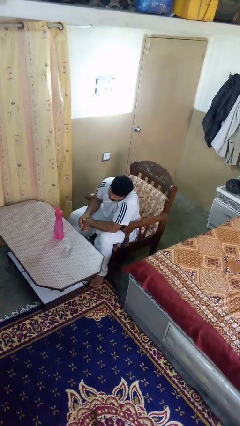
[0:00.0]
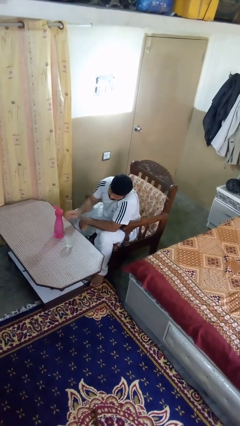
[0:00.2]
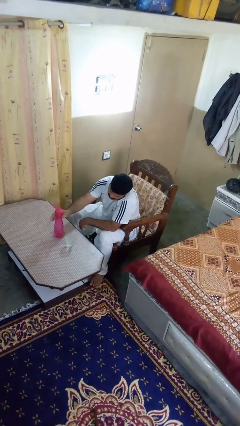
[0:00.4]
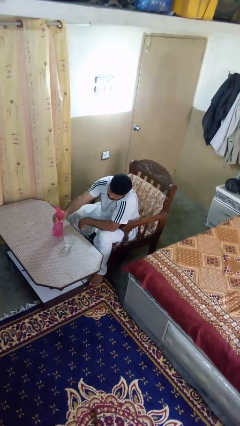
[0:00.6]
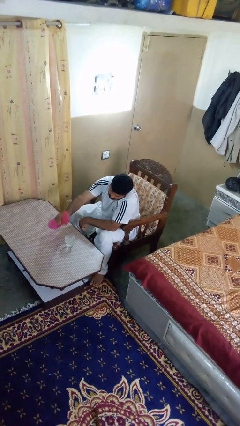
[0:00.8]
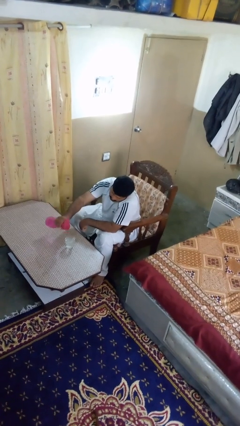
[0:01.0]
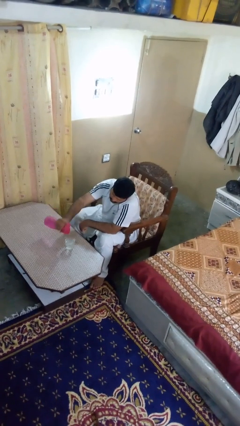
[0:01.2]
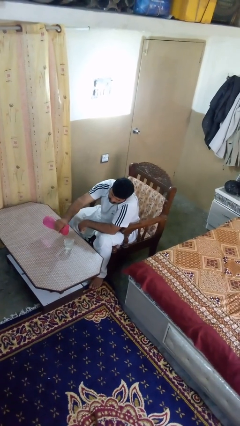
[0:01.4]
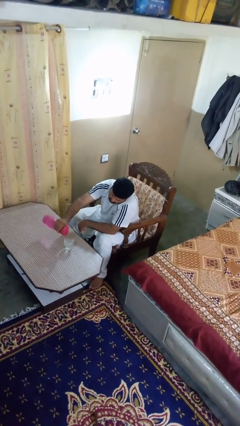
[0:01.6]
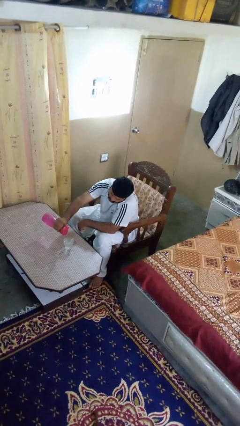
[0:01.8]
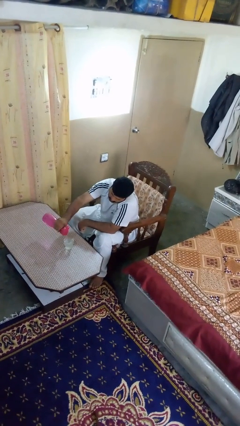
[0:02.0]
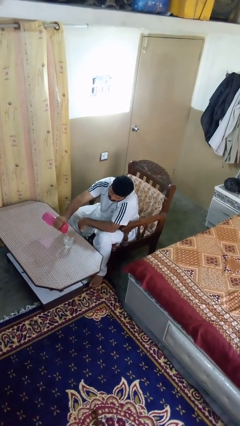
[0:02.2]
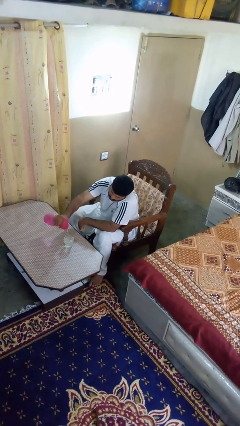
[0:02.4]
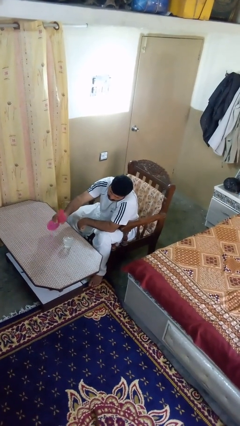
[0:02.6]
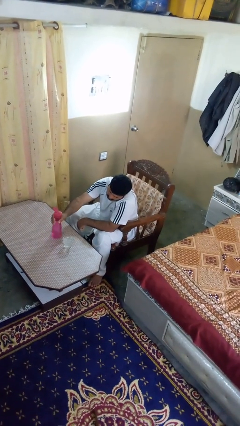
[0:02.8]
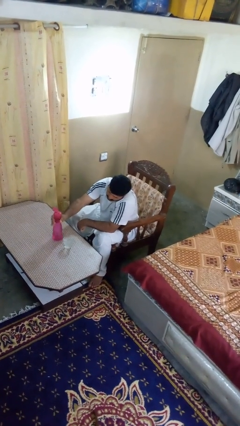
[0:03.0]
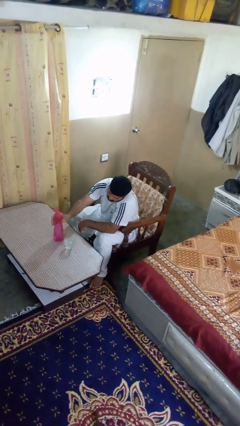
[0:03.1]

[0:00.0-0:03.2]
person pours liquid into cup

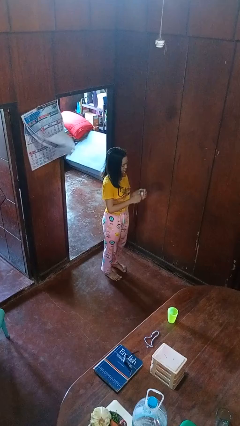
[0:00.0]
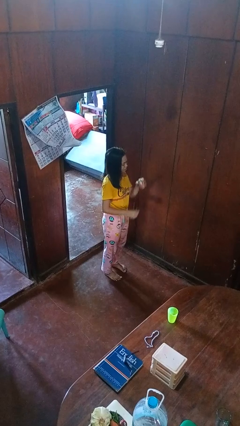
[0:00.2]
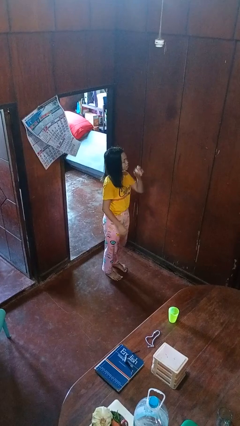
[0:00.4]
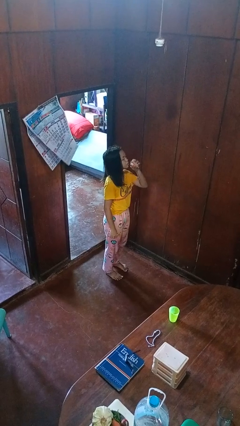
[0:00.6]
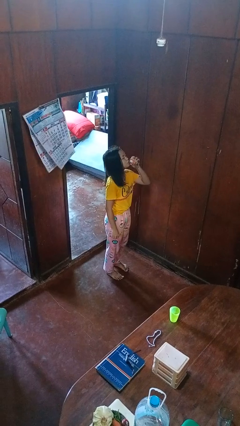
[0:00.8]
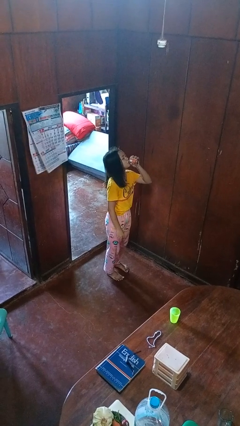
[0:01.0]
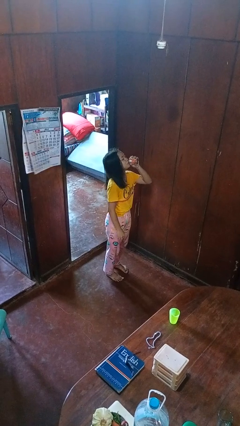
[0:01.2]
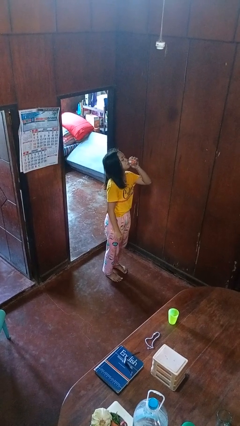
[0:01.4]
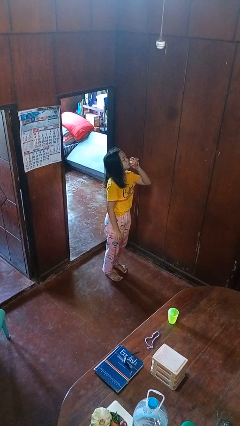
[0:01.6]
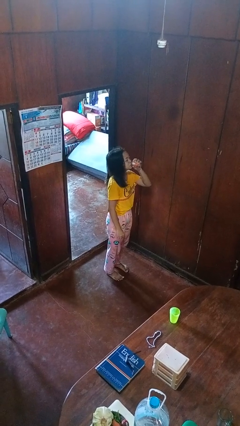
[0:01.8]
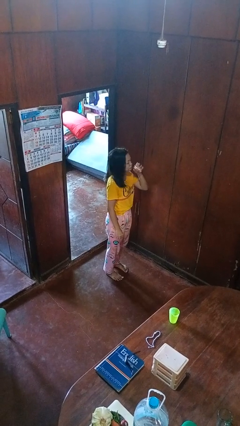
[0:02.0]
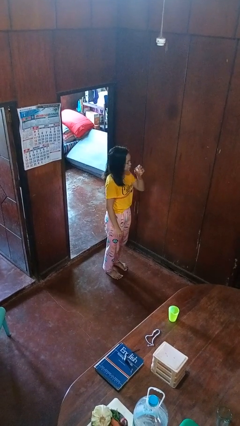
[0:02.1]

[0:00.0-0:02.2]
person drinks from beverage can

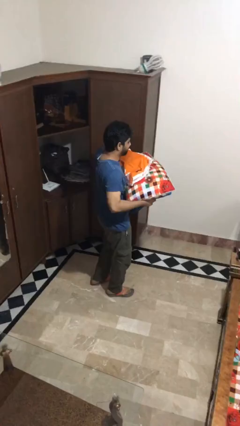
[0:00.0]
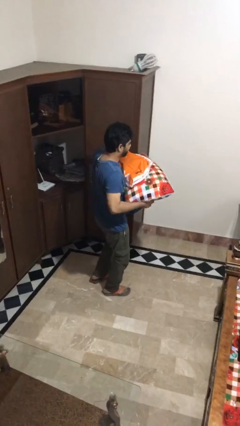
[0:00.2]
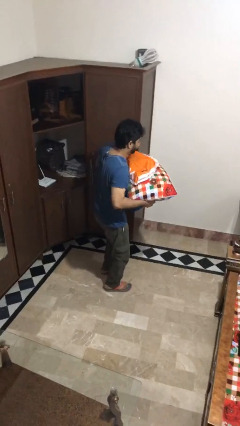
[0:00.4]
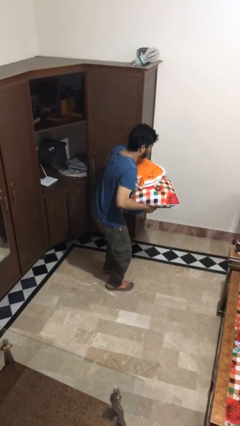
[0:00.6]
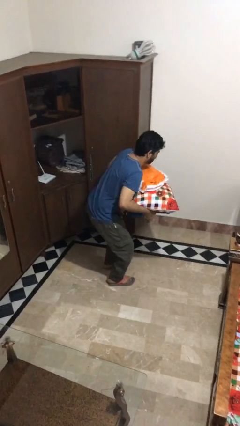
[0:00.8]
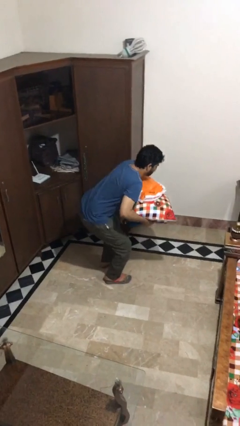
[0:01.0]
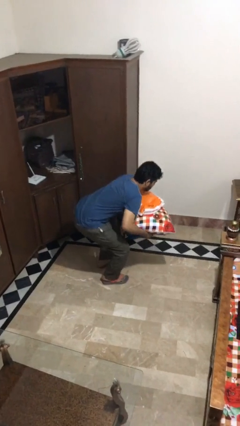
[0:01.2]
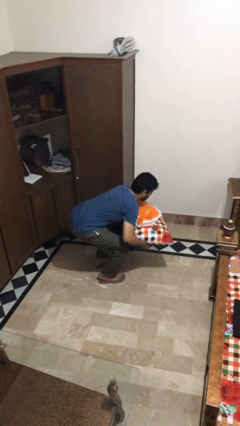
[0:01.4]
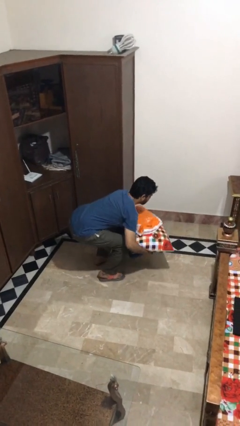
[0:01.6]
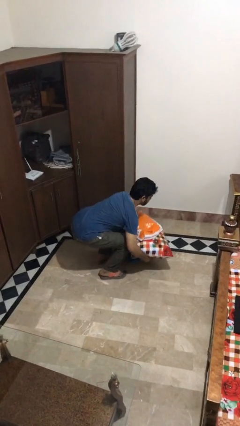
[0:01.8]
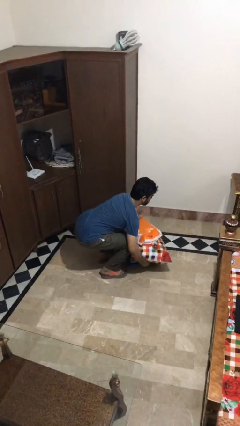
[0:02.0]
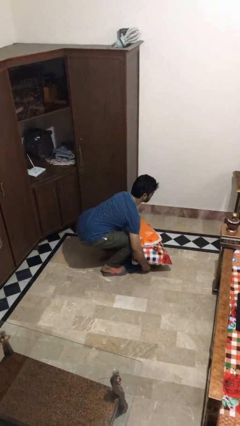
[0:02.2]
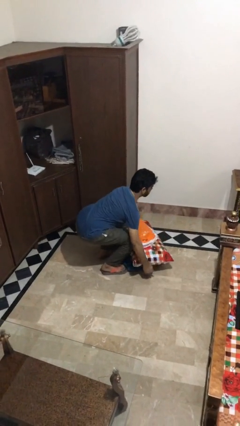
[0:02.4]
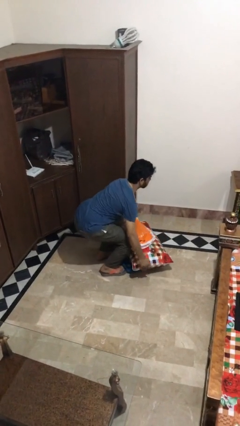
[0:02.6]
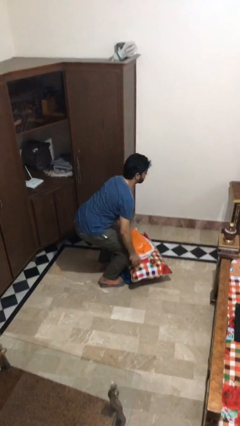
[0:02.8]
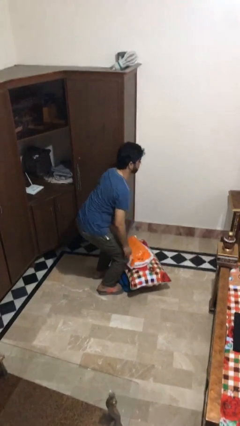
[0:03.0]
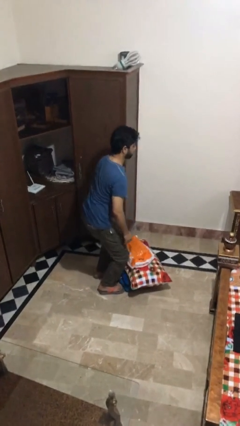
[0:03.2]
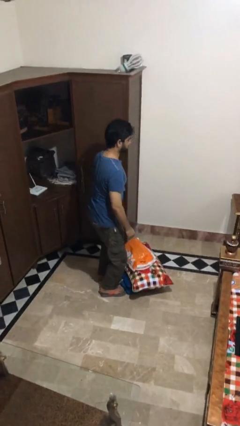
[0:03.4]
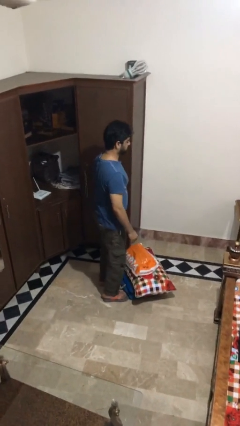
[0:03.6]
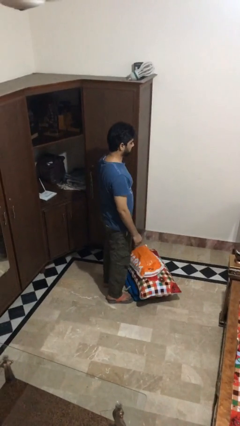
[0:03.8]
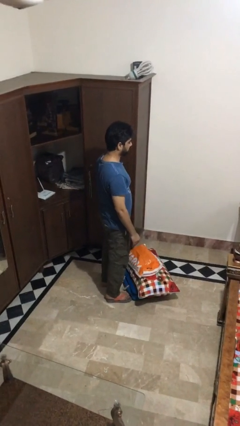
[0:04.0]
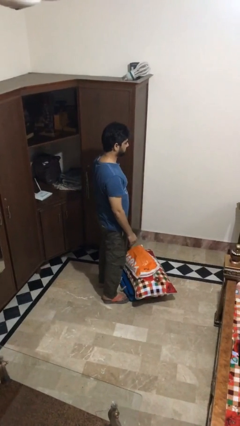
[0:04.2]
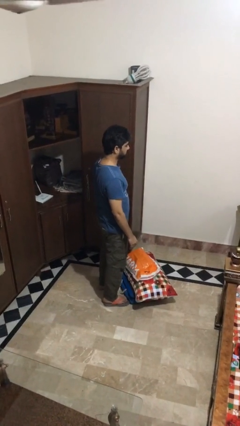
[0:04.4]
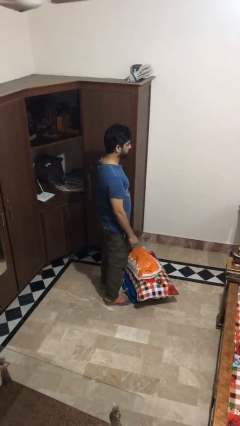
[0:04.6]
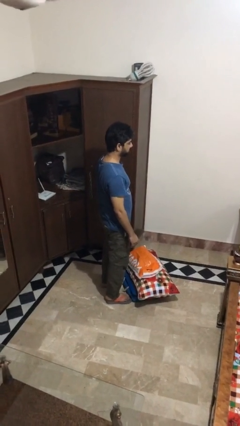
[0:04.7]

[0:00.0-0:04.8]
person puts down object on floor

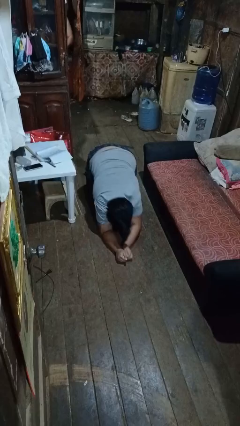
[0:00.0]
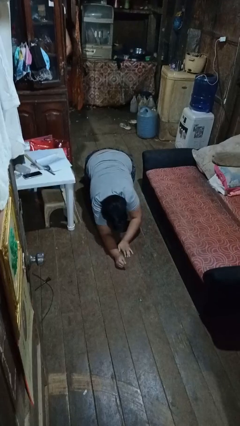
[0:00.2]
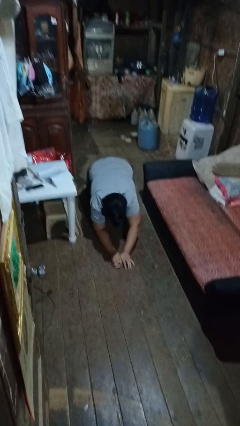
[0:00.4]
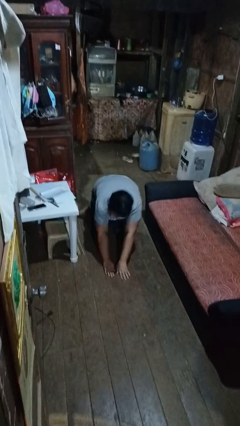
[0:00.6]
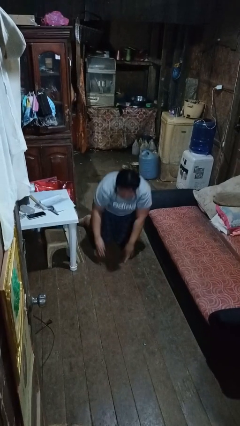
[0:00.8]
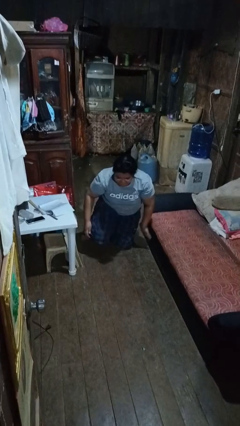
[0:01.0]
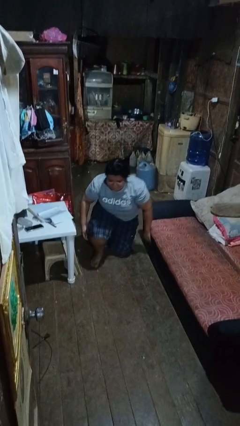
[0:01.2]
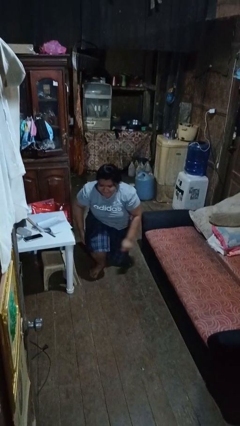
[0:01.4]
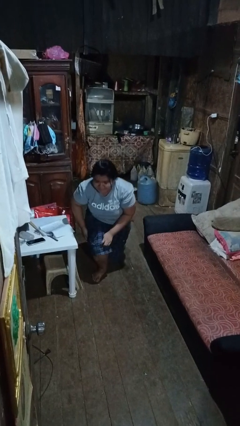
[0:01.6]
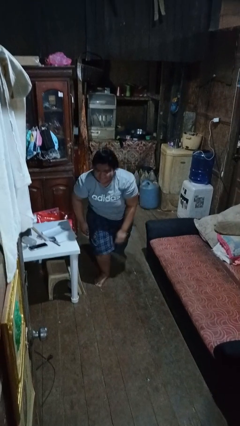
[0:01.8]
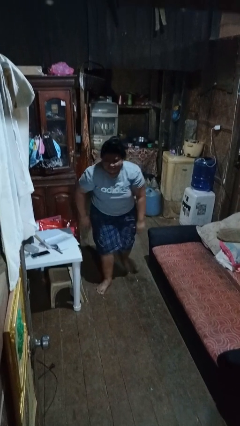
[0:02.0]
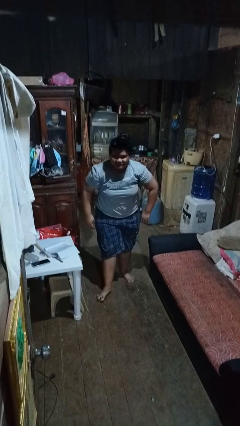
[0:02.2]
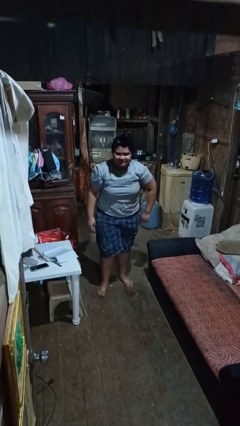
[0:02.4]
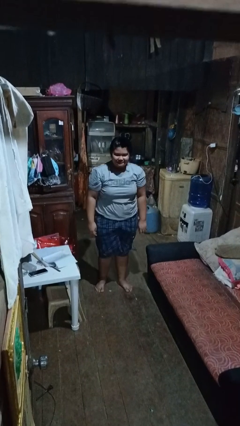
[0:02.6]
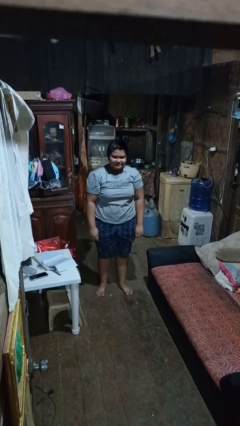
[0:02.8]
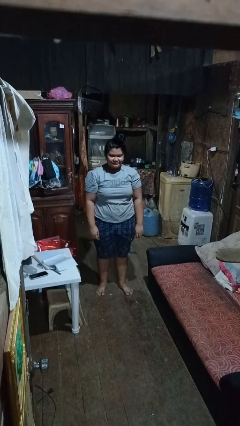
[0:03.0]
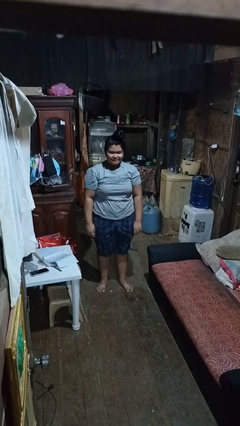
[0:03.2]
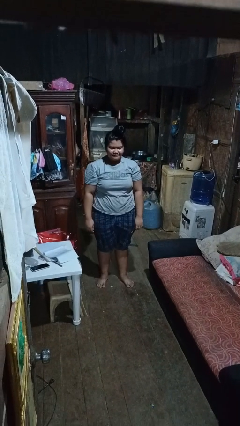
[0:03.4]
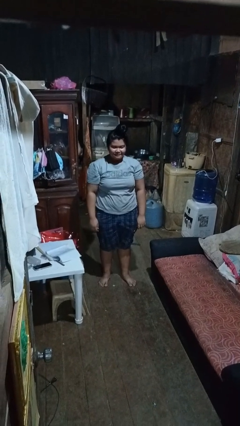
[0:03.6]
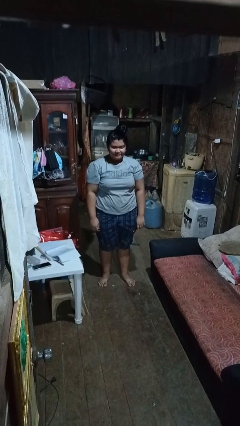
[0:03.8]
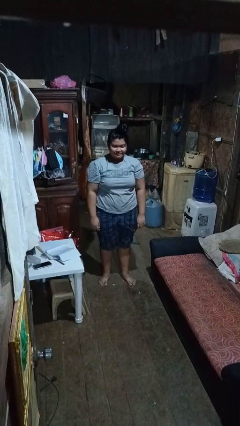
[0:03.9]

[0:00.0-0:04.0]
person stands up from floor

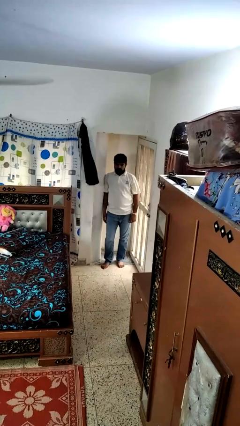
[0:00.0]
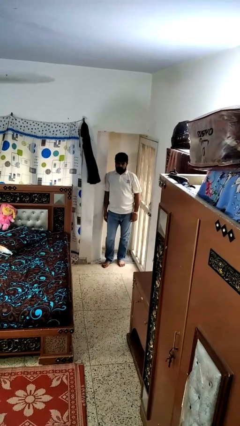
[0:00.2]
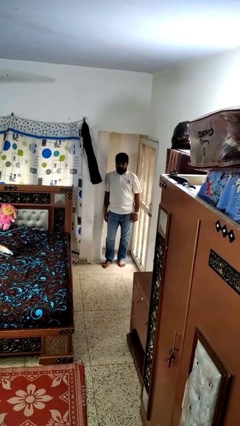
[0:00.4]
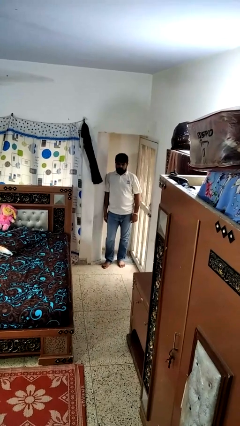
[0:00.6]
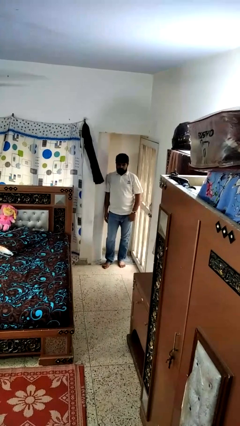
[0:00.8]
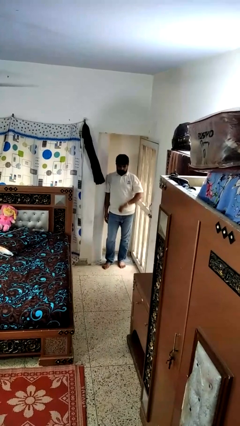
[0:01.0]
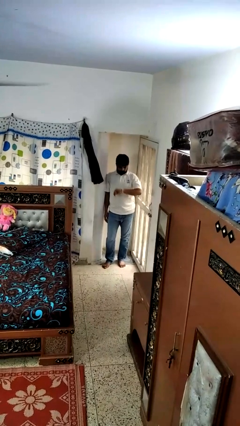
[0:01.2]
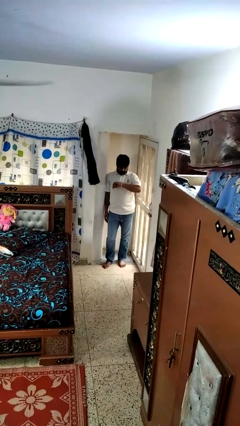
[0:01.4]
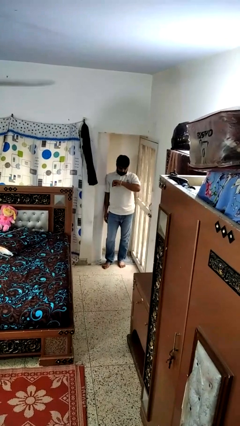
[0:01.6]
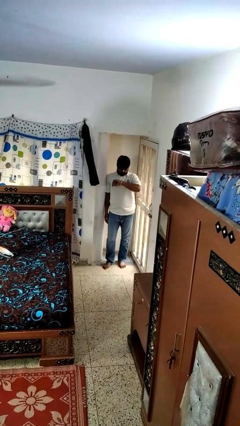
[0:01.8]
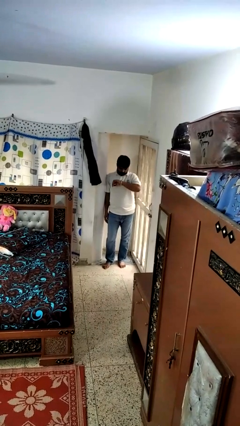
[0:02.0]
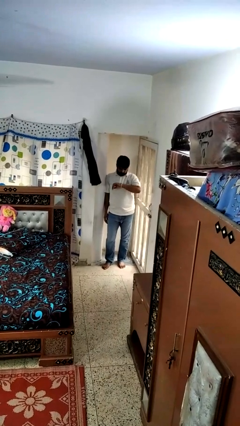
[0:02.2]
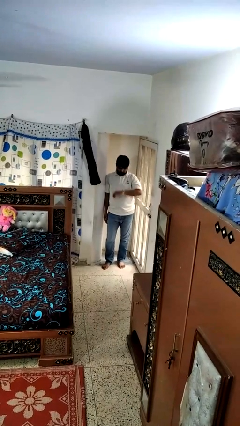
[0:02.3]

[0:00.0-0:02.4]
person looks at wristwatch

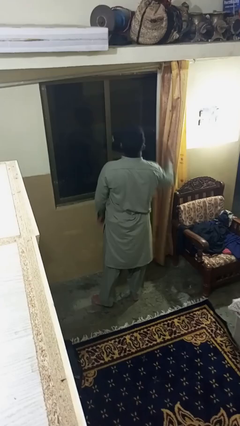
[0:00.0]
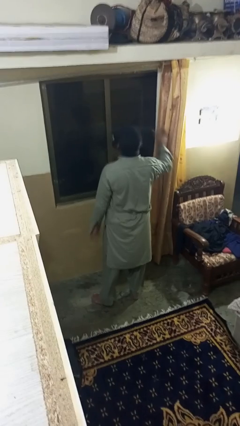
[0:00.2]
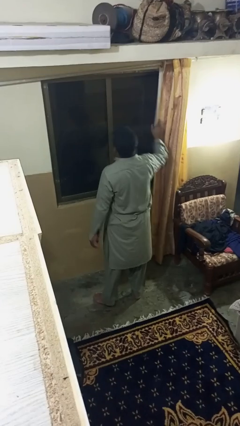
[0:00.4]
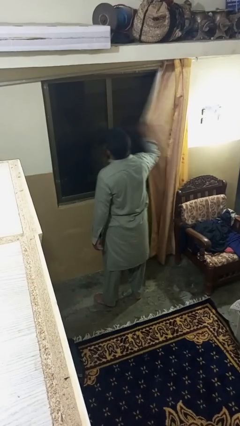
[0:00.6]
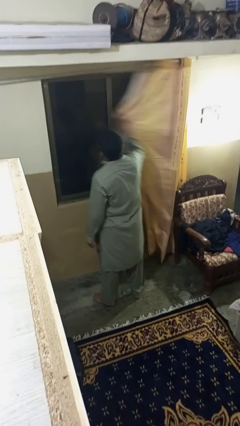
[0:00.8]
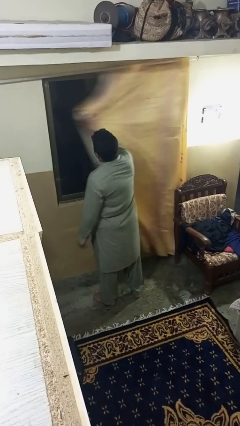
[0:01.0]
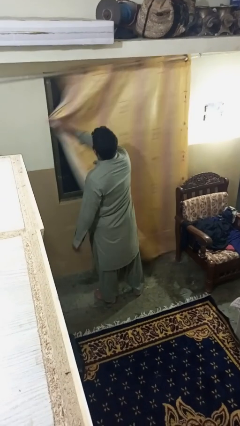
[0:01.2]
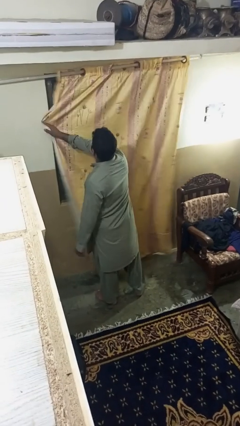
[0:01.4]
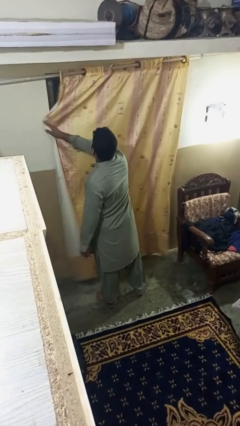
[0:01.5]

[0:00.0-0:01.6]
person closes curtains
